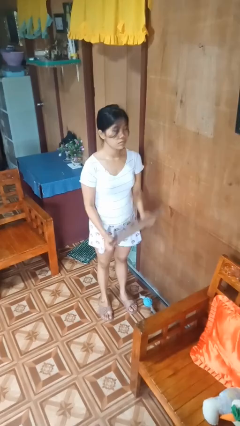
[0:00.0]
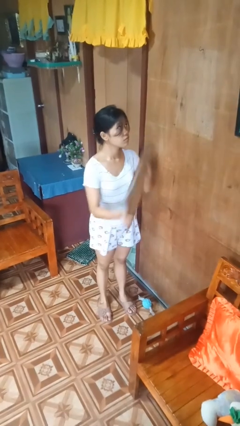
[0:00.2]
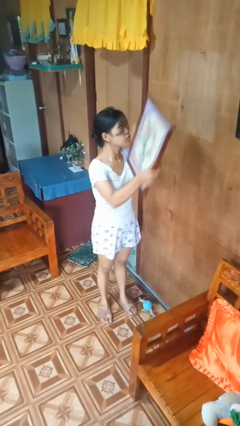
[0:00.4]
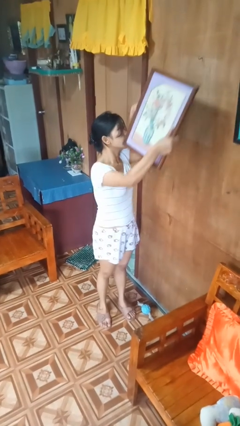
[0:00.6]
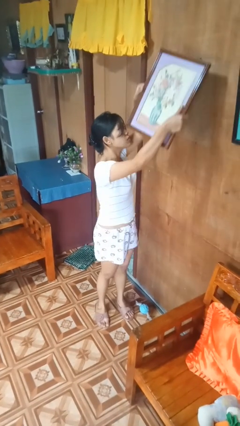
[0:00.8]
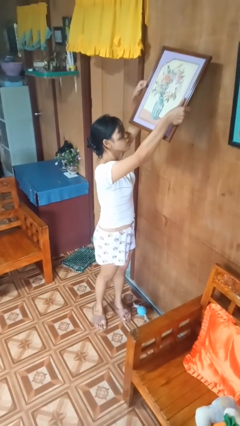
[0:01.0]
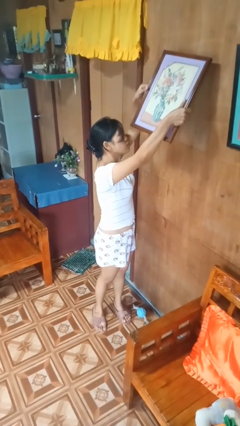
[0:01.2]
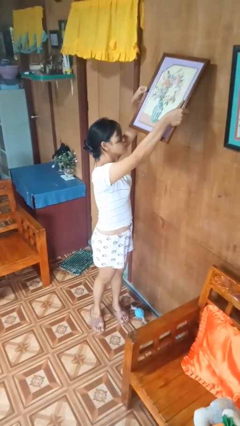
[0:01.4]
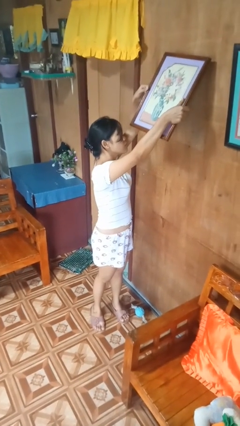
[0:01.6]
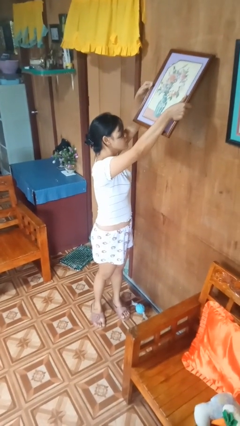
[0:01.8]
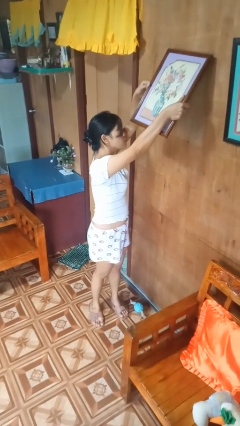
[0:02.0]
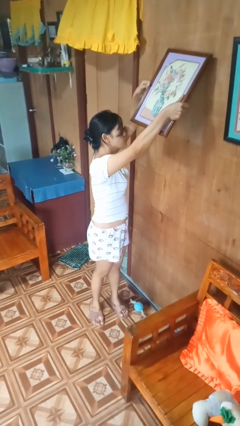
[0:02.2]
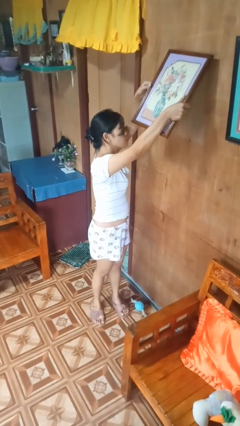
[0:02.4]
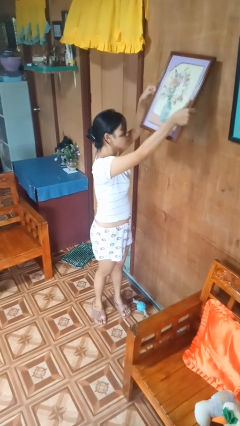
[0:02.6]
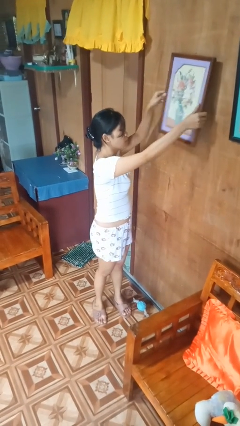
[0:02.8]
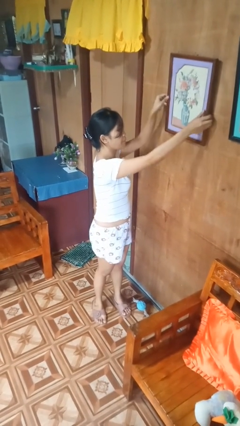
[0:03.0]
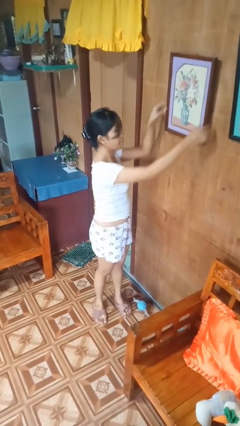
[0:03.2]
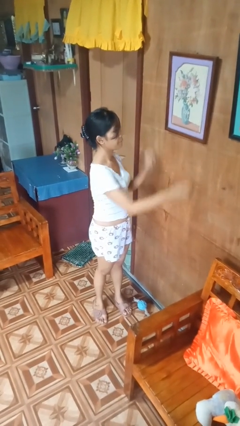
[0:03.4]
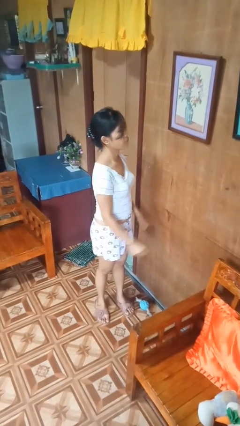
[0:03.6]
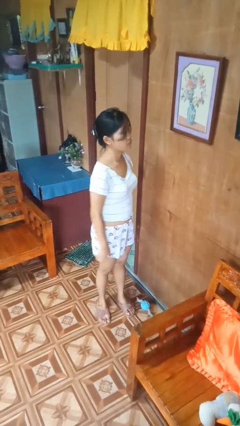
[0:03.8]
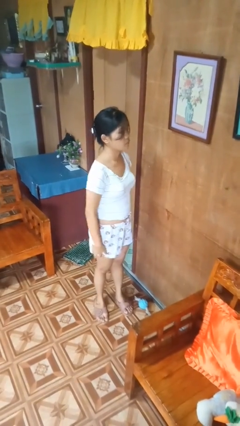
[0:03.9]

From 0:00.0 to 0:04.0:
person puts up picture frame

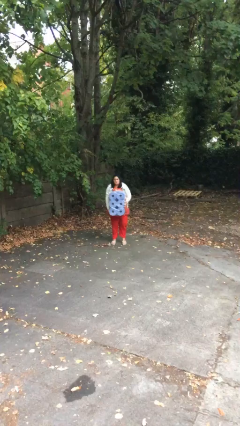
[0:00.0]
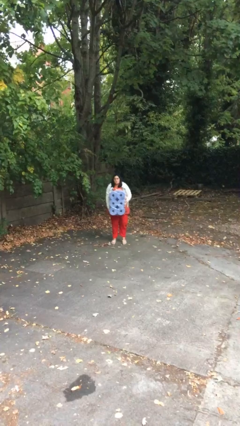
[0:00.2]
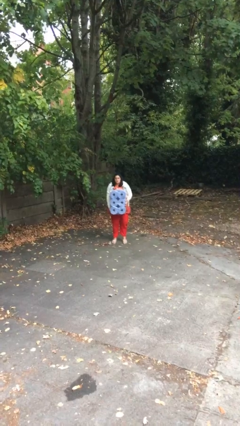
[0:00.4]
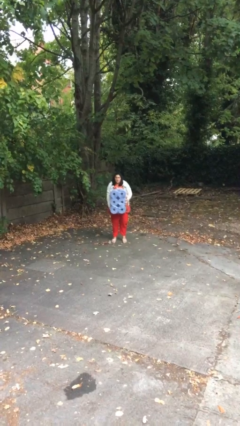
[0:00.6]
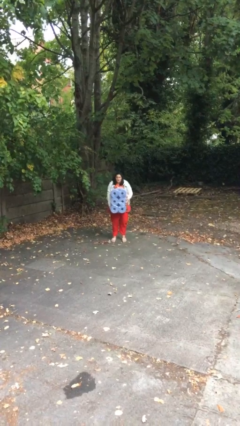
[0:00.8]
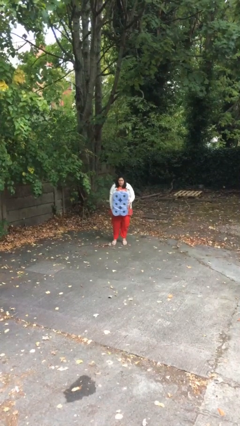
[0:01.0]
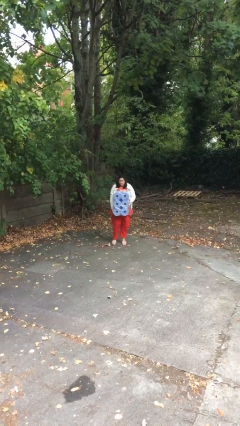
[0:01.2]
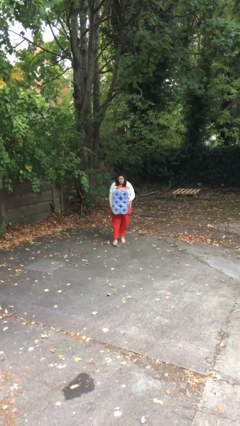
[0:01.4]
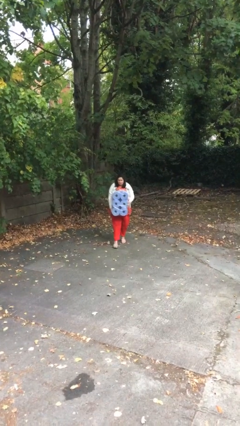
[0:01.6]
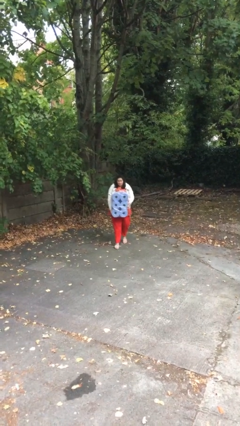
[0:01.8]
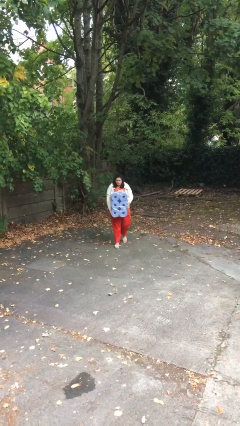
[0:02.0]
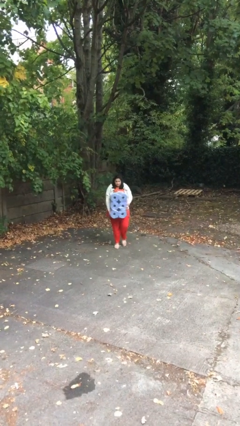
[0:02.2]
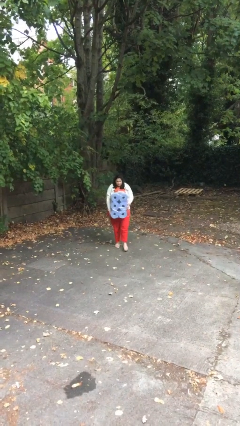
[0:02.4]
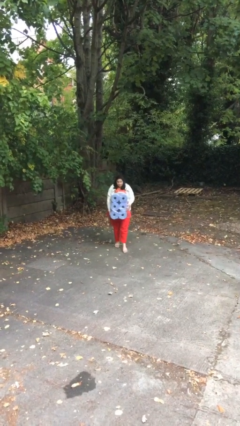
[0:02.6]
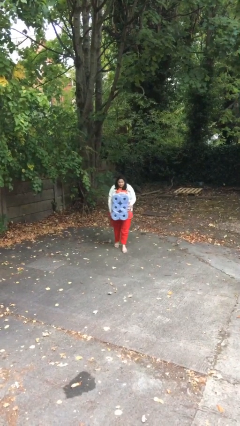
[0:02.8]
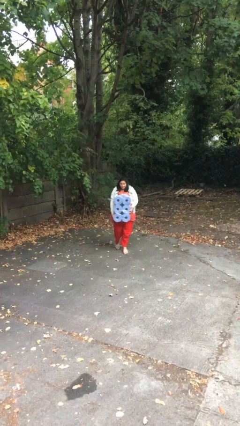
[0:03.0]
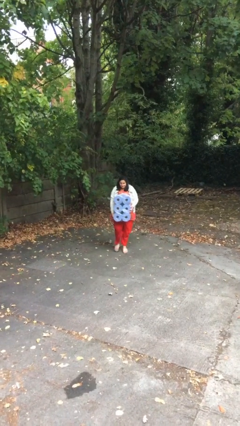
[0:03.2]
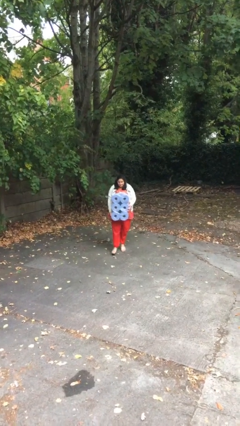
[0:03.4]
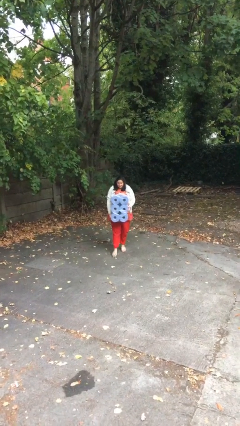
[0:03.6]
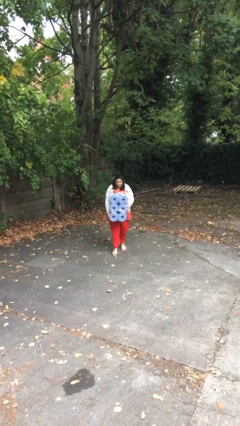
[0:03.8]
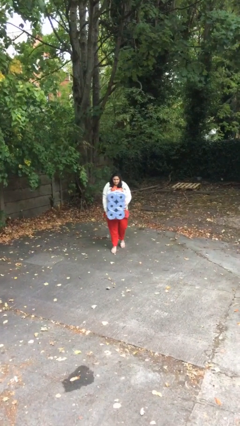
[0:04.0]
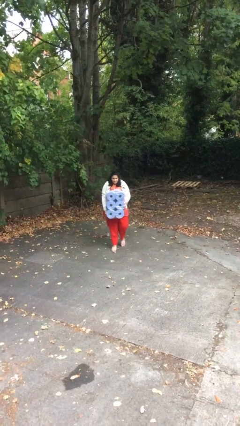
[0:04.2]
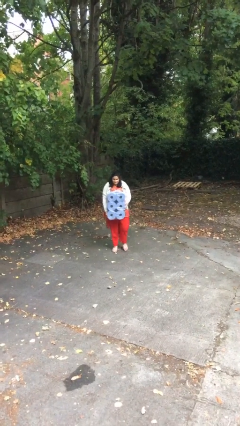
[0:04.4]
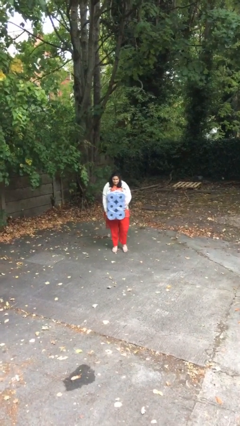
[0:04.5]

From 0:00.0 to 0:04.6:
person carries heavy object

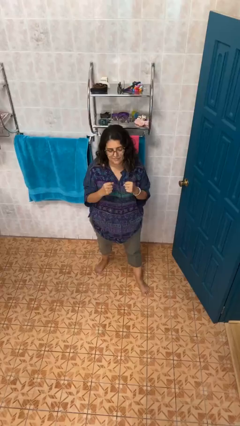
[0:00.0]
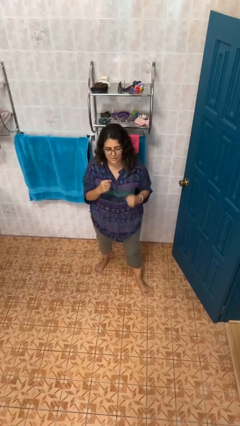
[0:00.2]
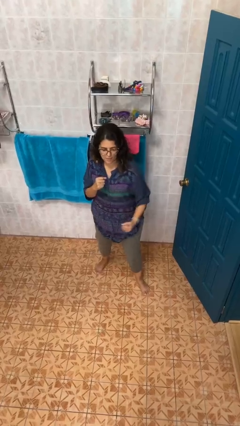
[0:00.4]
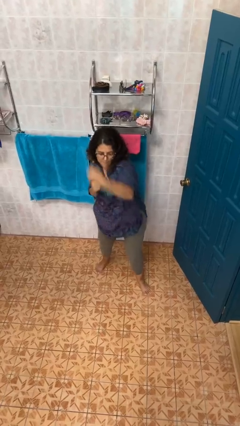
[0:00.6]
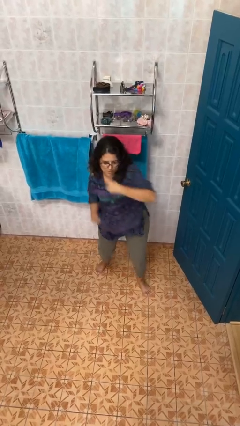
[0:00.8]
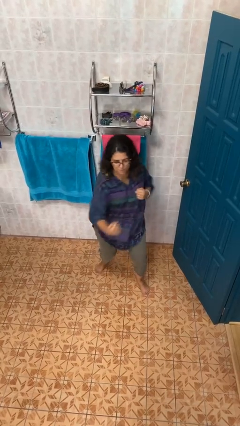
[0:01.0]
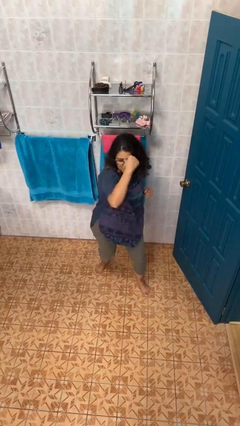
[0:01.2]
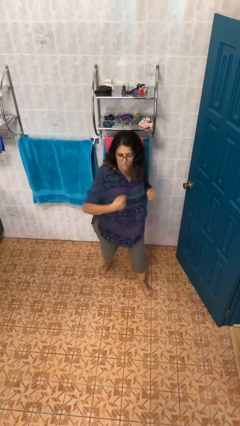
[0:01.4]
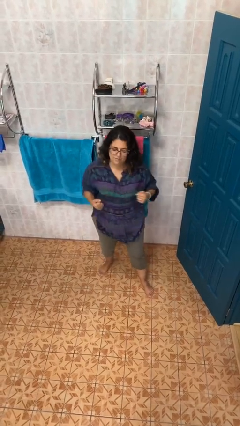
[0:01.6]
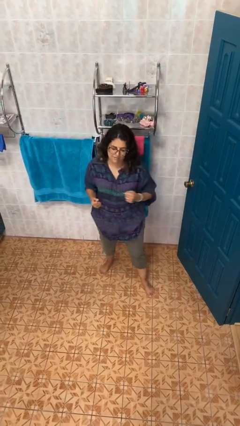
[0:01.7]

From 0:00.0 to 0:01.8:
person punches

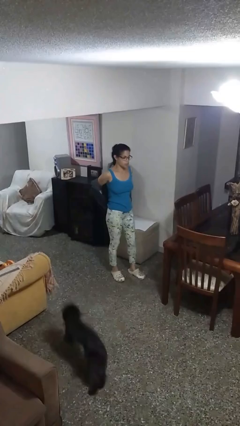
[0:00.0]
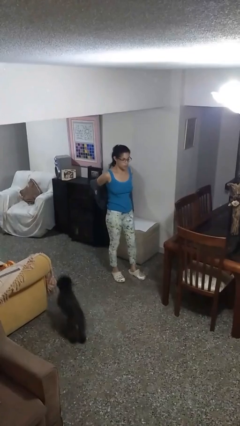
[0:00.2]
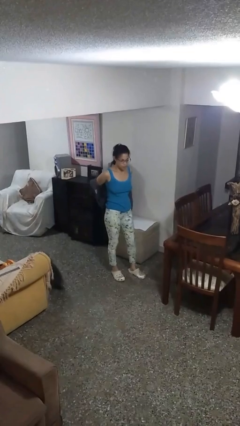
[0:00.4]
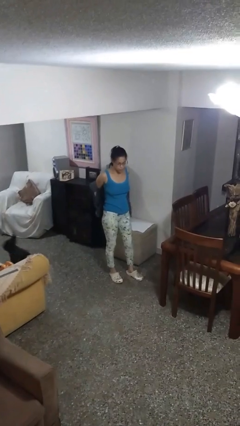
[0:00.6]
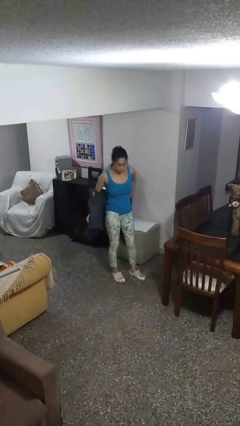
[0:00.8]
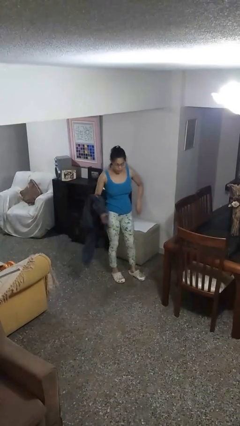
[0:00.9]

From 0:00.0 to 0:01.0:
person takes off jacket

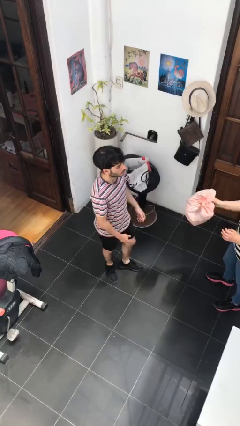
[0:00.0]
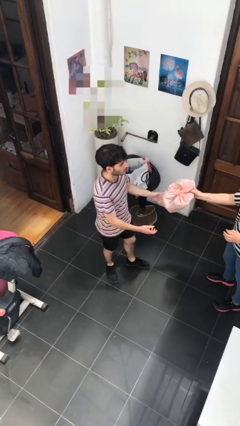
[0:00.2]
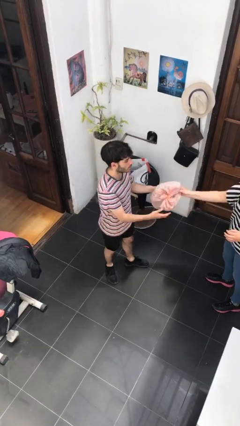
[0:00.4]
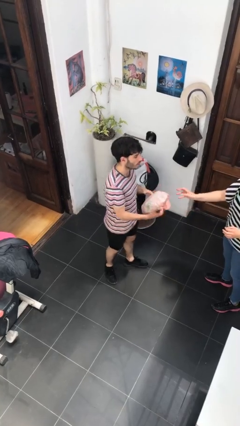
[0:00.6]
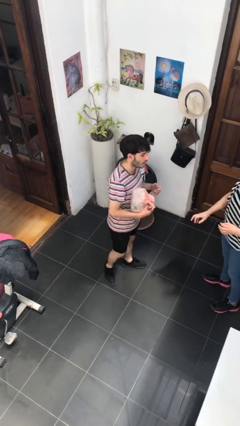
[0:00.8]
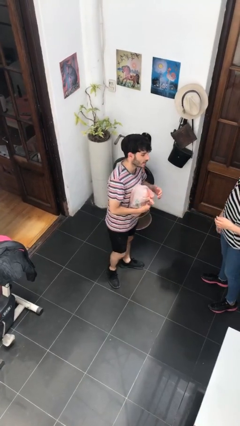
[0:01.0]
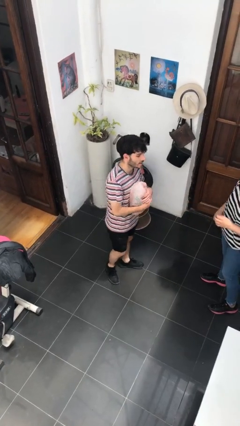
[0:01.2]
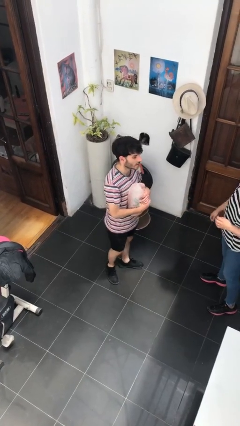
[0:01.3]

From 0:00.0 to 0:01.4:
person transfers object to person

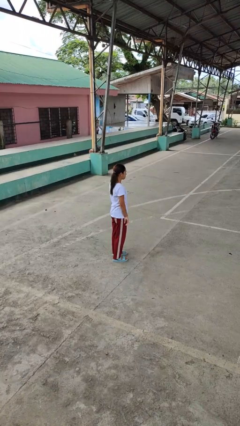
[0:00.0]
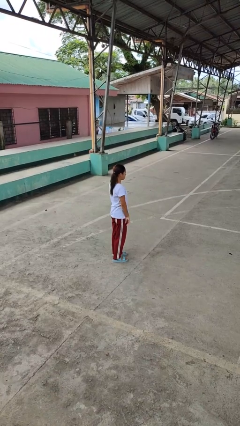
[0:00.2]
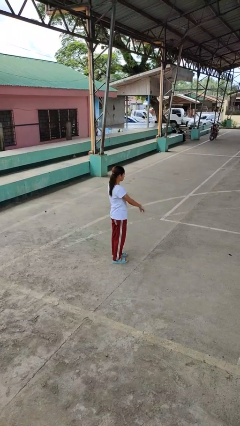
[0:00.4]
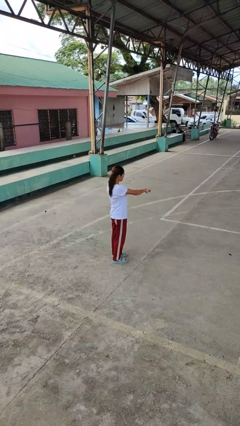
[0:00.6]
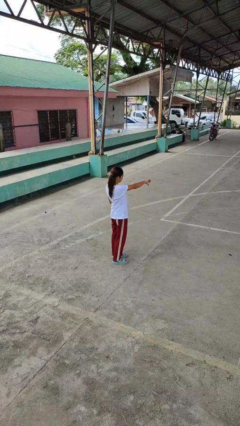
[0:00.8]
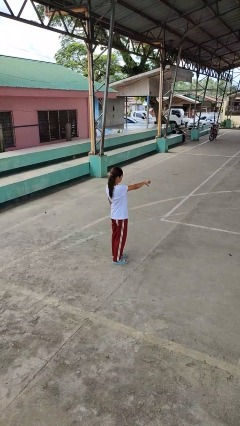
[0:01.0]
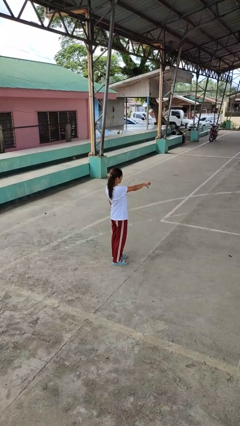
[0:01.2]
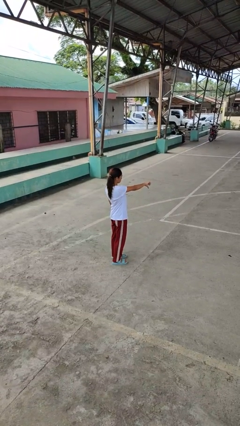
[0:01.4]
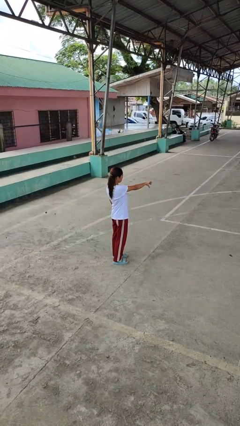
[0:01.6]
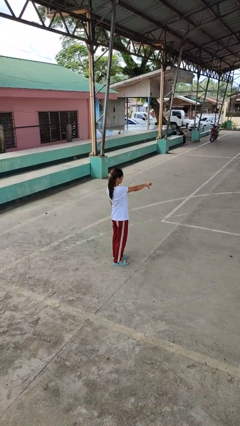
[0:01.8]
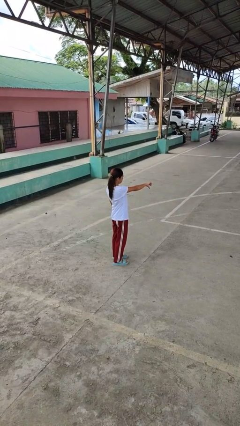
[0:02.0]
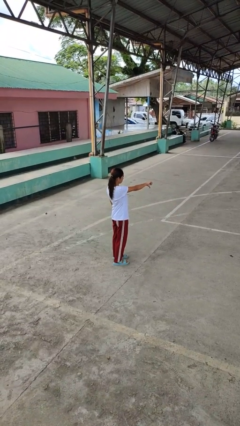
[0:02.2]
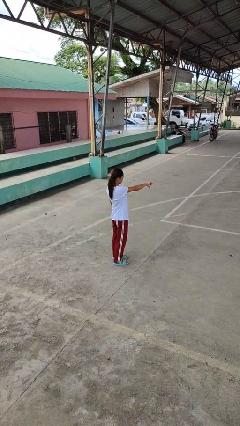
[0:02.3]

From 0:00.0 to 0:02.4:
person gestures thumbs down

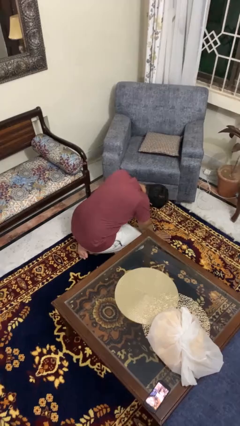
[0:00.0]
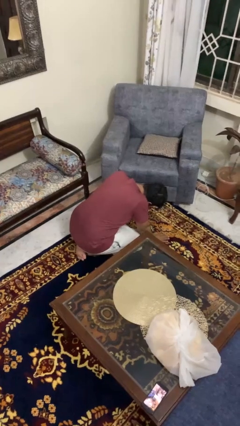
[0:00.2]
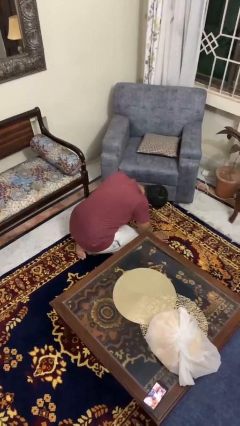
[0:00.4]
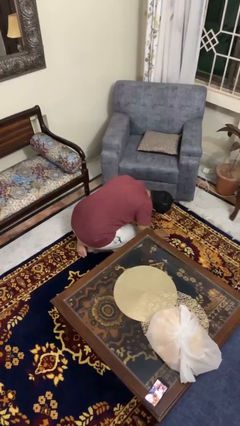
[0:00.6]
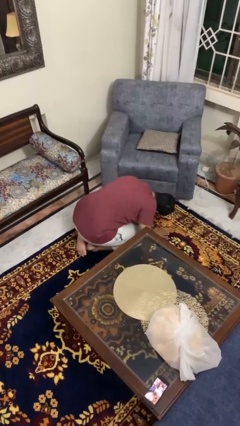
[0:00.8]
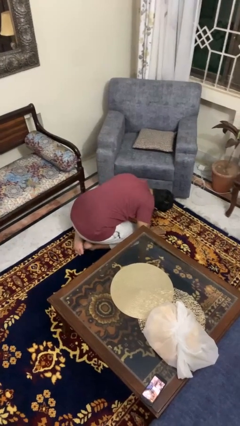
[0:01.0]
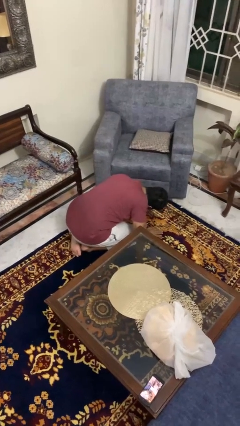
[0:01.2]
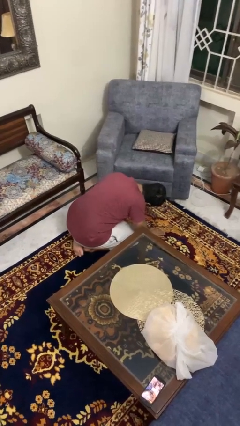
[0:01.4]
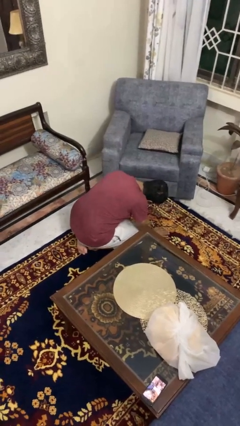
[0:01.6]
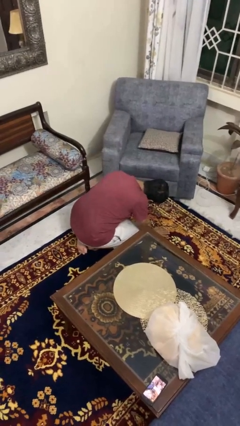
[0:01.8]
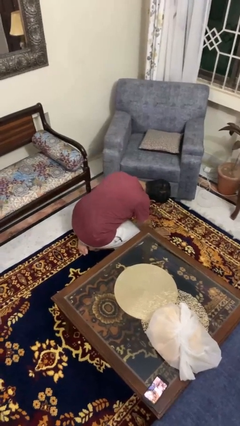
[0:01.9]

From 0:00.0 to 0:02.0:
person searches under couch
